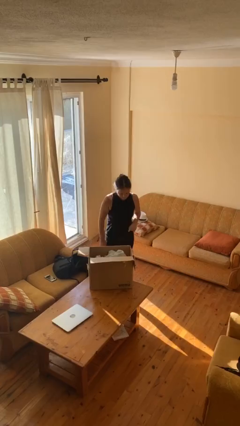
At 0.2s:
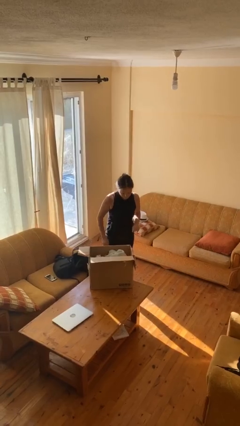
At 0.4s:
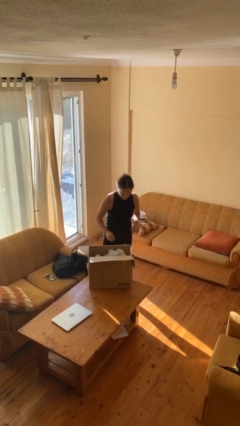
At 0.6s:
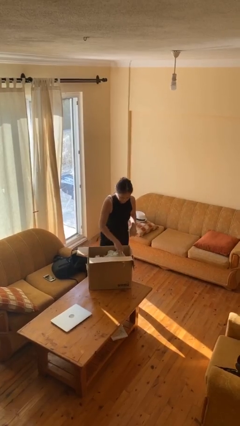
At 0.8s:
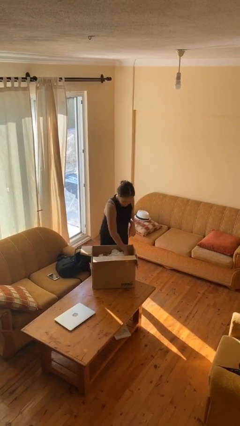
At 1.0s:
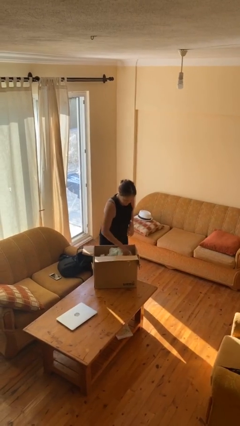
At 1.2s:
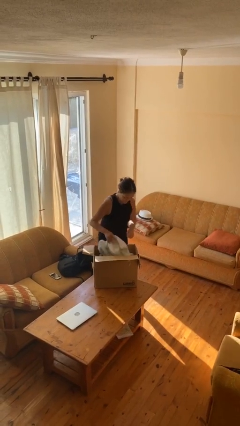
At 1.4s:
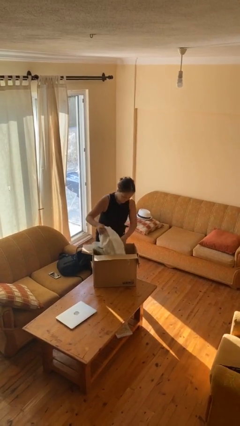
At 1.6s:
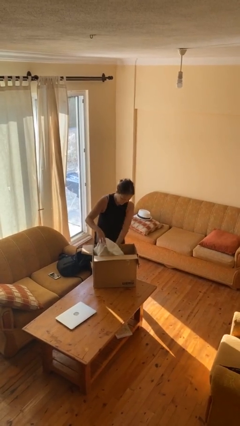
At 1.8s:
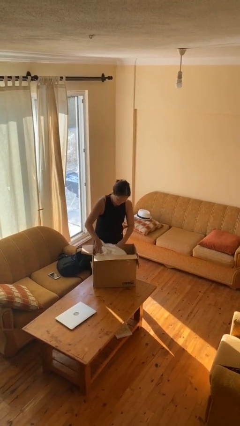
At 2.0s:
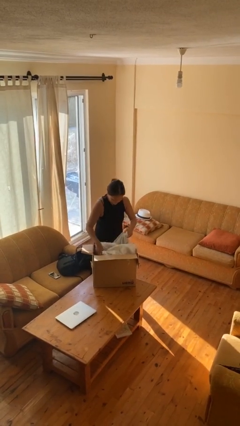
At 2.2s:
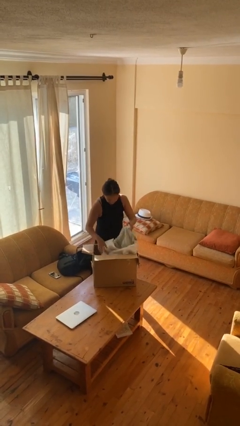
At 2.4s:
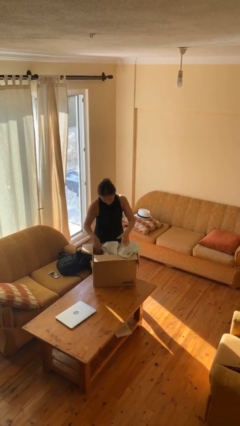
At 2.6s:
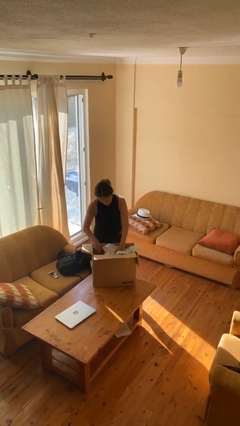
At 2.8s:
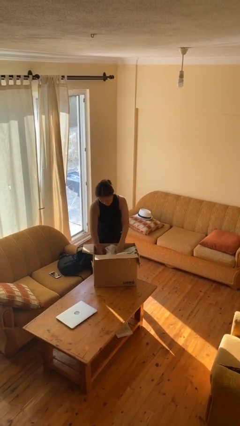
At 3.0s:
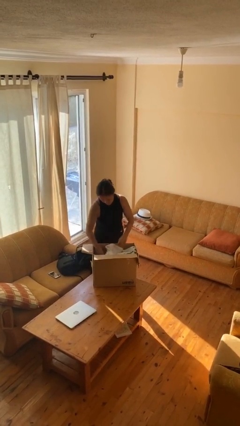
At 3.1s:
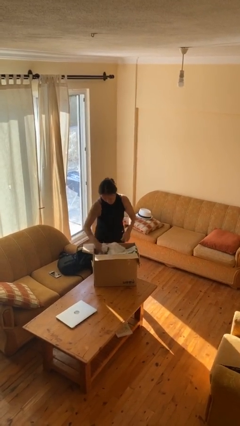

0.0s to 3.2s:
person searches in box

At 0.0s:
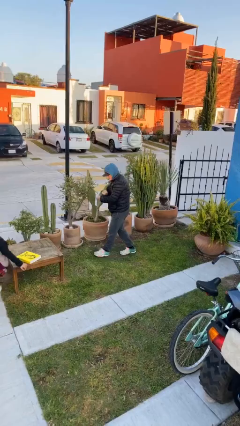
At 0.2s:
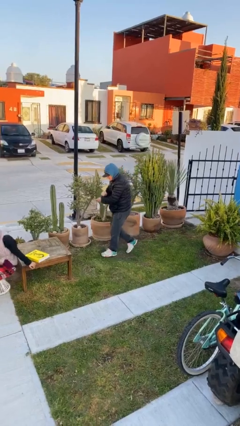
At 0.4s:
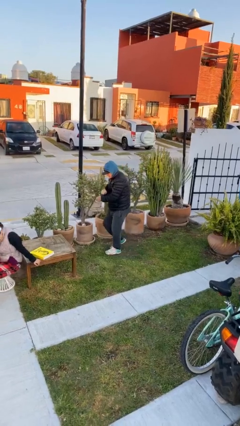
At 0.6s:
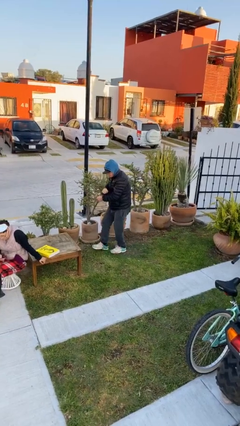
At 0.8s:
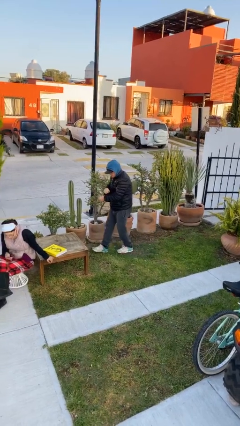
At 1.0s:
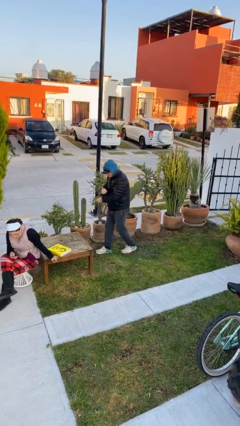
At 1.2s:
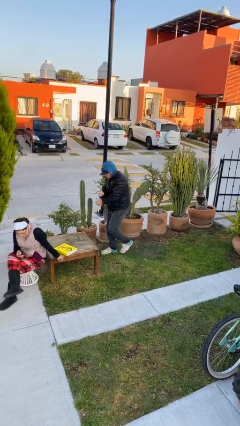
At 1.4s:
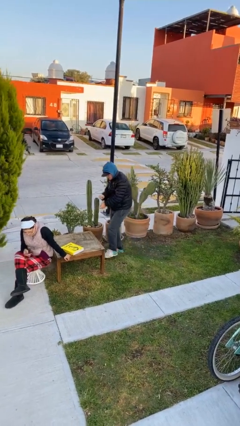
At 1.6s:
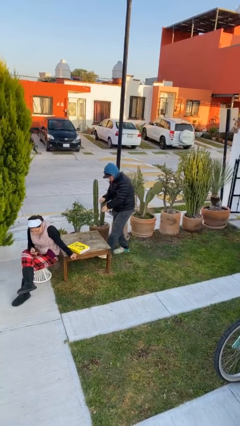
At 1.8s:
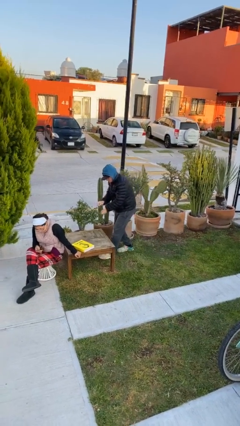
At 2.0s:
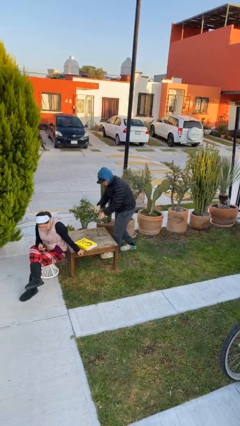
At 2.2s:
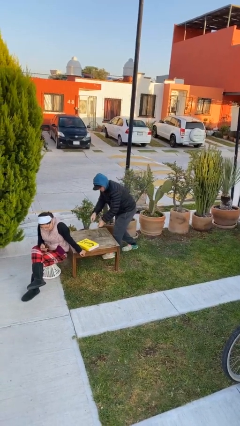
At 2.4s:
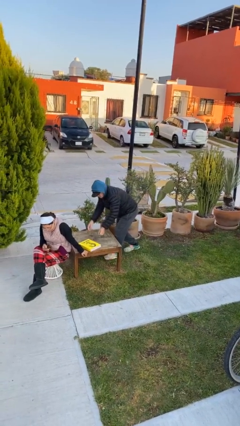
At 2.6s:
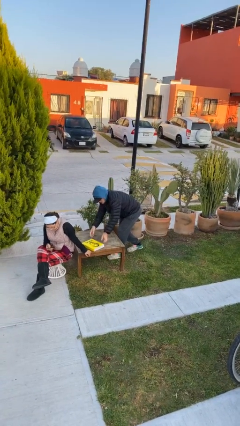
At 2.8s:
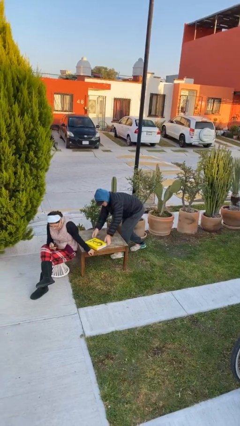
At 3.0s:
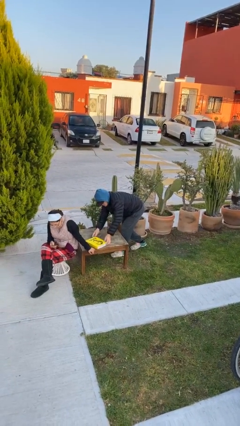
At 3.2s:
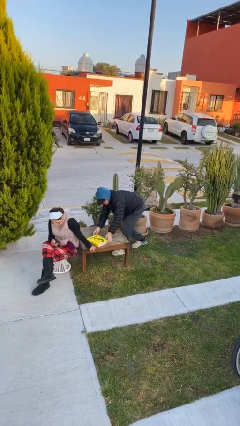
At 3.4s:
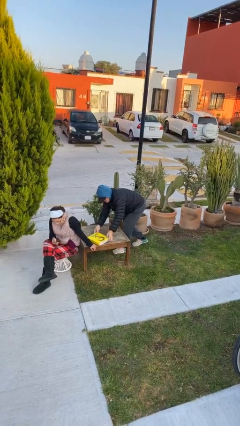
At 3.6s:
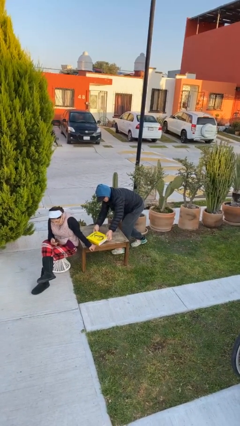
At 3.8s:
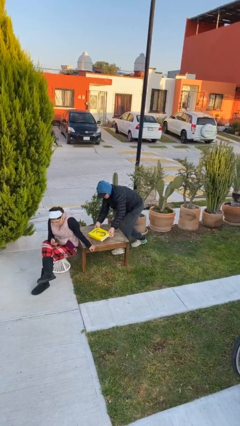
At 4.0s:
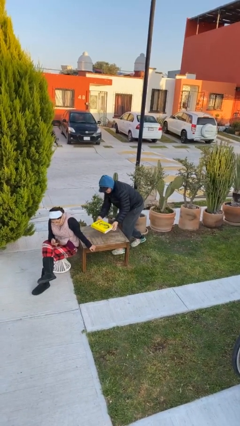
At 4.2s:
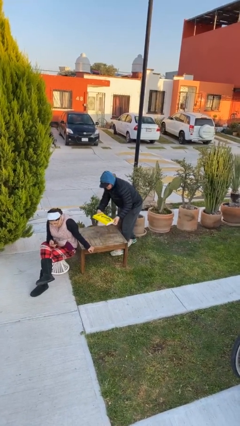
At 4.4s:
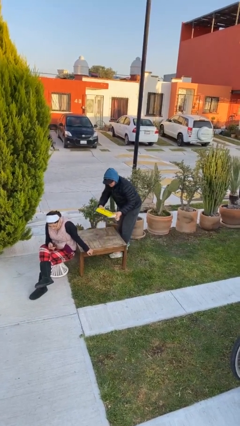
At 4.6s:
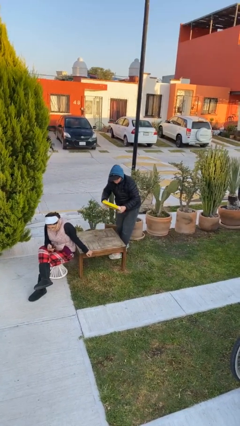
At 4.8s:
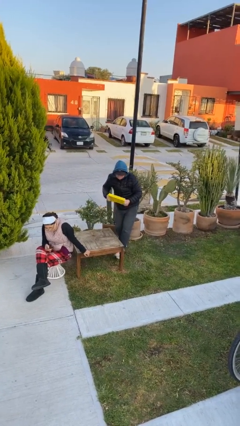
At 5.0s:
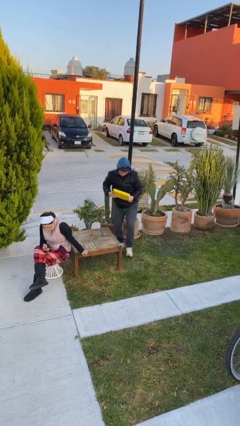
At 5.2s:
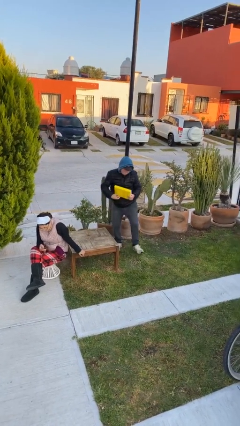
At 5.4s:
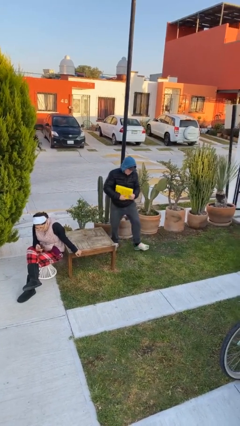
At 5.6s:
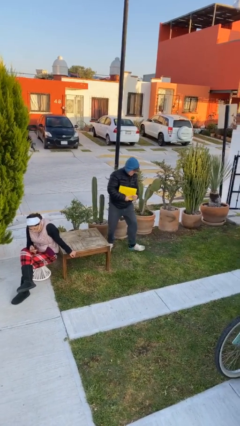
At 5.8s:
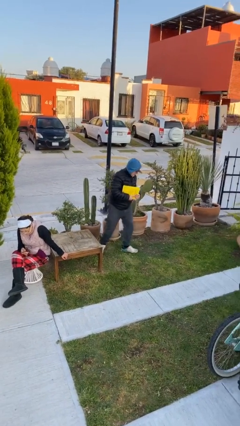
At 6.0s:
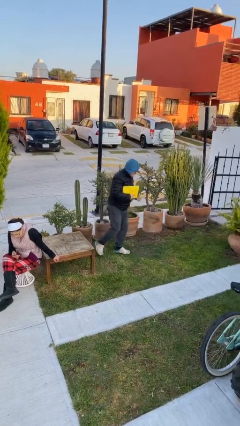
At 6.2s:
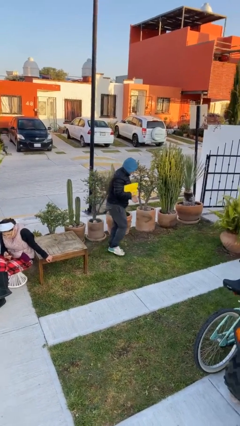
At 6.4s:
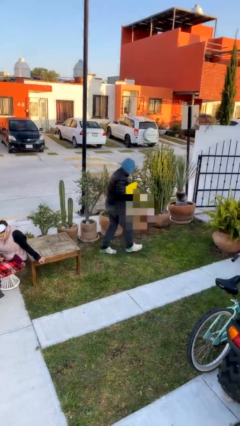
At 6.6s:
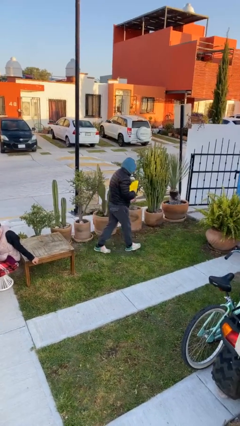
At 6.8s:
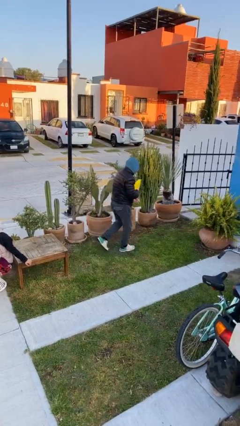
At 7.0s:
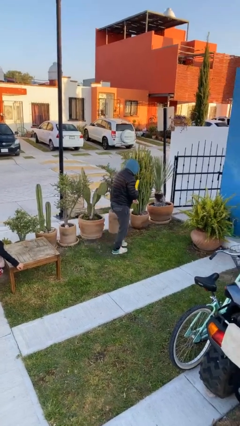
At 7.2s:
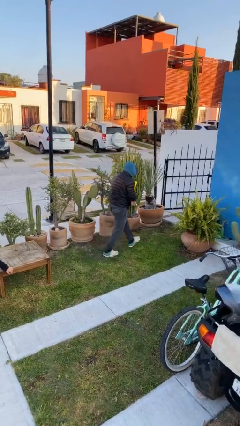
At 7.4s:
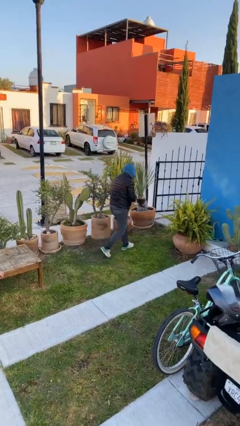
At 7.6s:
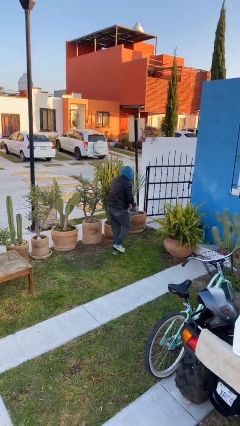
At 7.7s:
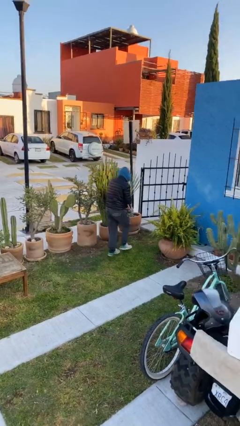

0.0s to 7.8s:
person steals object from person

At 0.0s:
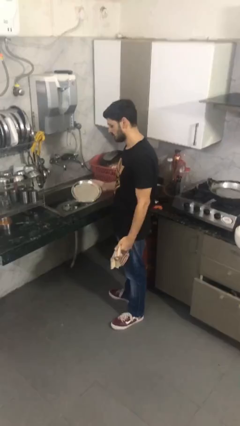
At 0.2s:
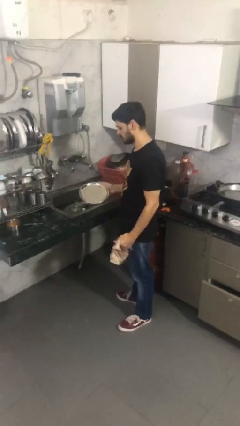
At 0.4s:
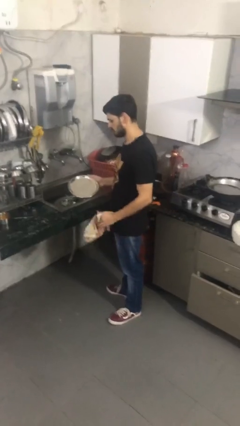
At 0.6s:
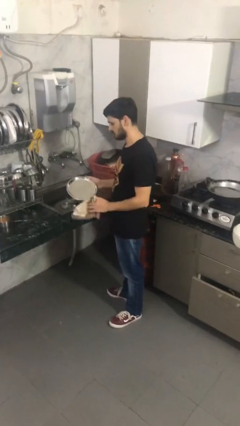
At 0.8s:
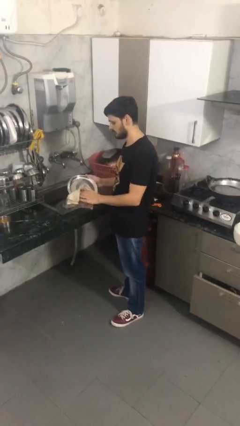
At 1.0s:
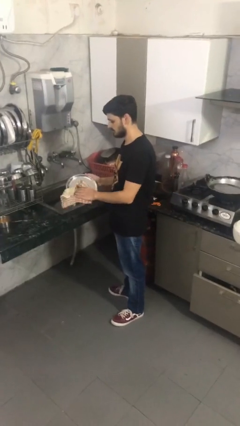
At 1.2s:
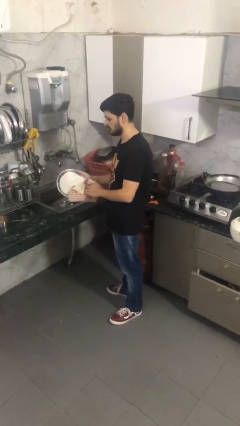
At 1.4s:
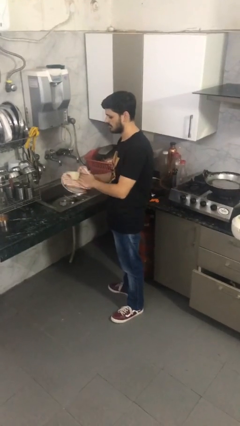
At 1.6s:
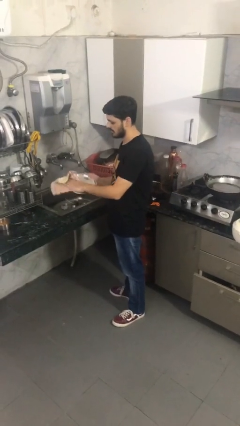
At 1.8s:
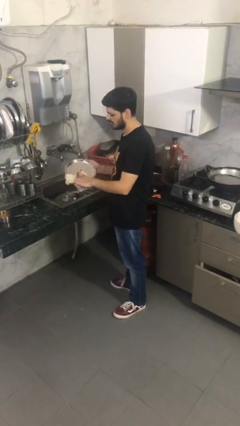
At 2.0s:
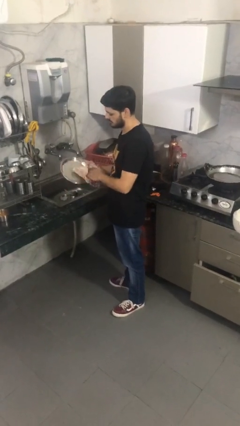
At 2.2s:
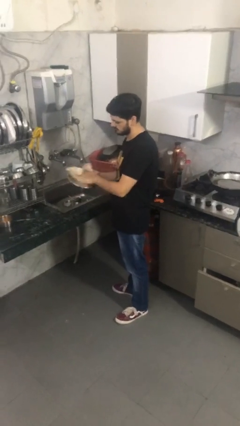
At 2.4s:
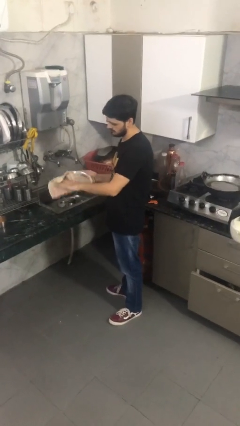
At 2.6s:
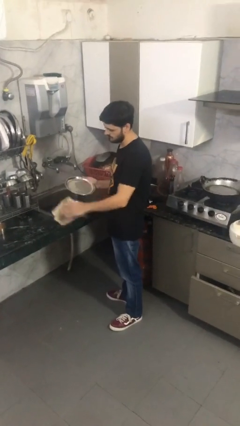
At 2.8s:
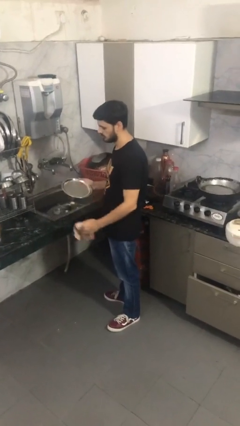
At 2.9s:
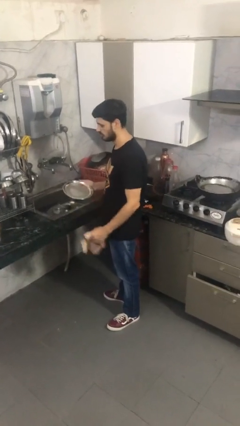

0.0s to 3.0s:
person dries dish

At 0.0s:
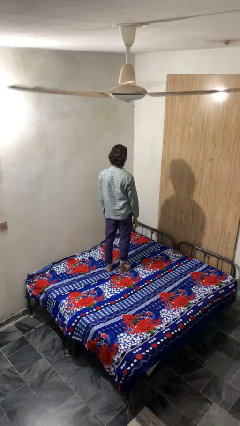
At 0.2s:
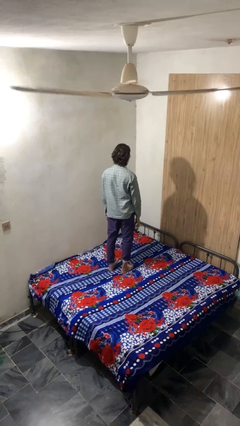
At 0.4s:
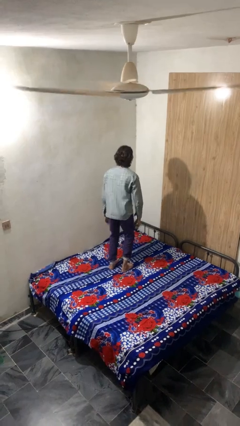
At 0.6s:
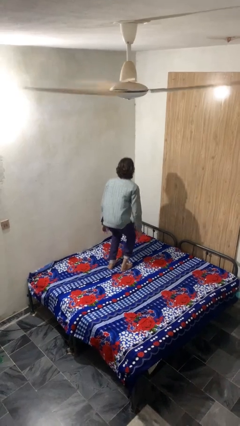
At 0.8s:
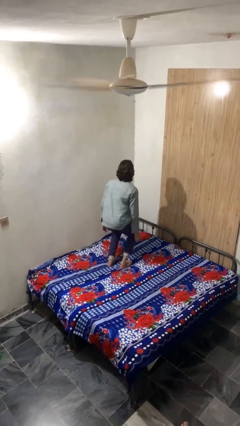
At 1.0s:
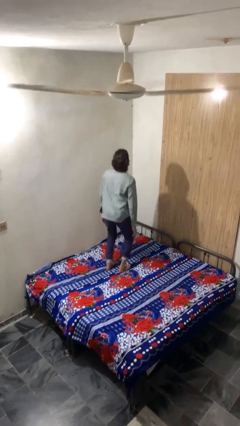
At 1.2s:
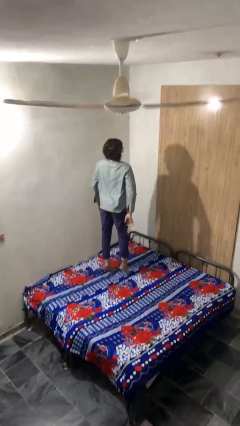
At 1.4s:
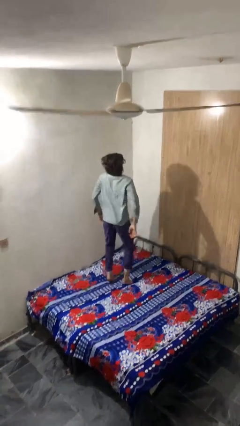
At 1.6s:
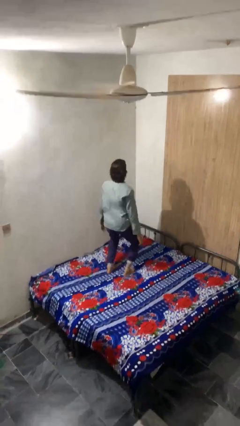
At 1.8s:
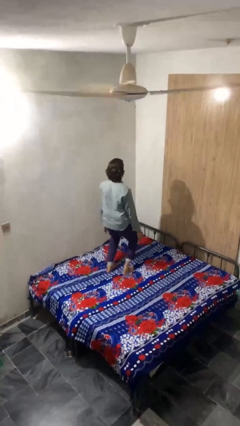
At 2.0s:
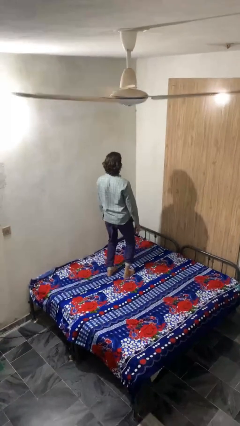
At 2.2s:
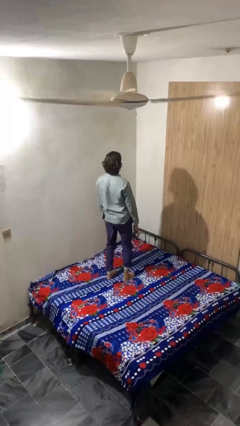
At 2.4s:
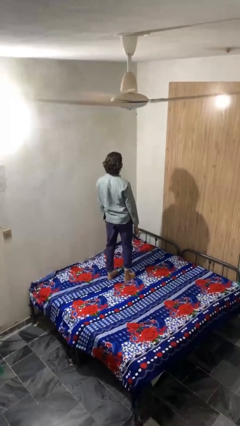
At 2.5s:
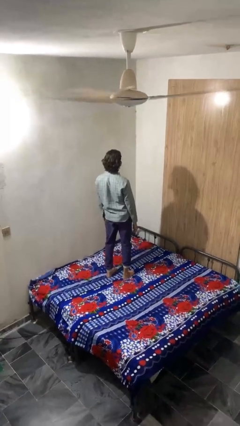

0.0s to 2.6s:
person jumps on bed

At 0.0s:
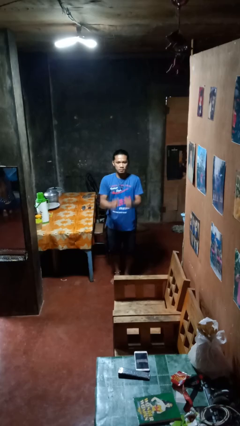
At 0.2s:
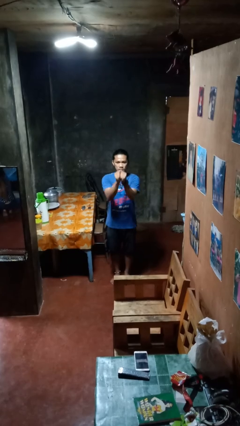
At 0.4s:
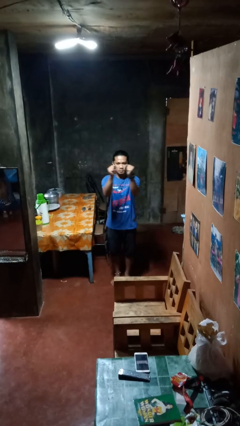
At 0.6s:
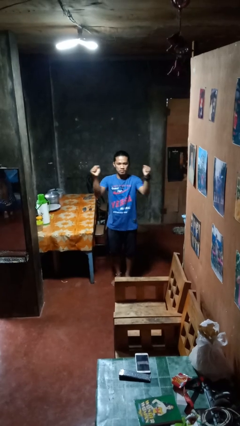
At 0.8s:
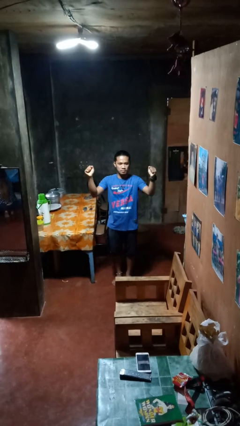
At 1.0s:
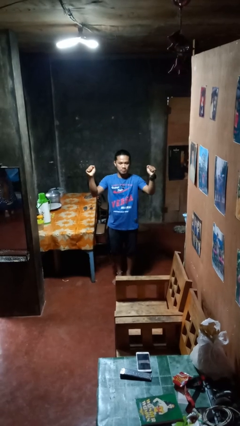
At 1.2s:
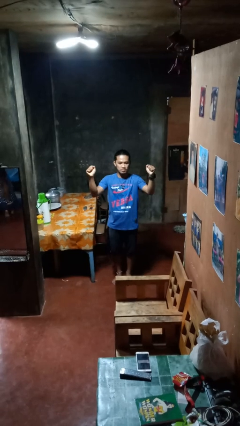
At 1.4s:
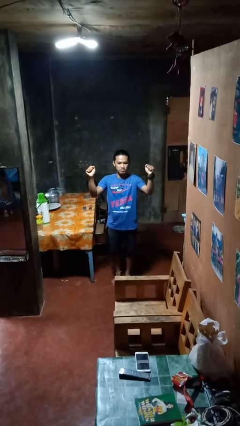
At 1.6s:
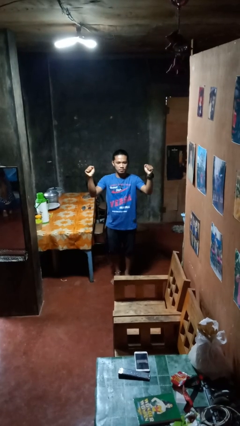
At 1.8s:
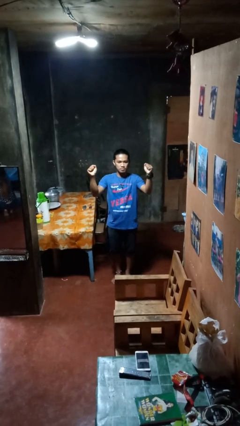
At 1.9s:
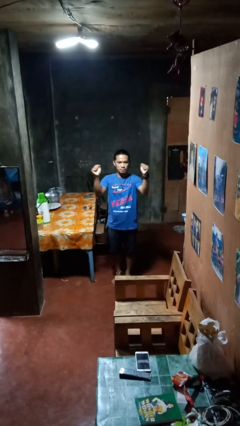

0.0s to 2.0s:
person gestures zoom in
